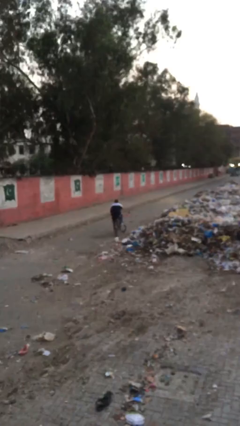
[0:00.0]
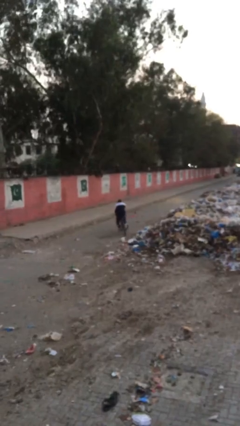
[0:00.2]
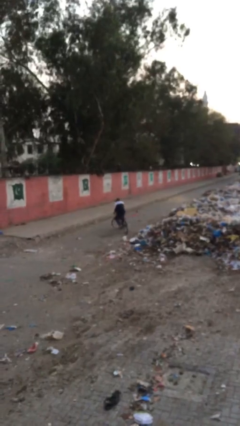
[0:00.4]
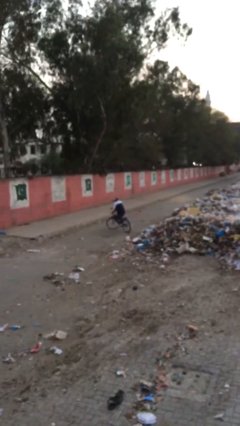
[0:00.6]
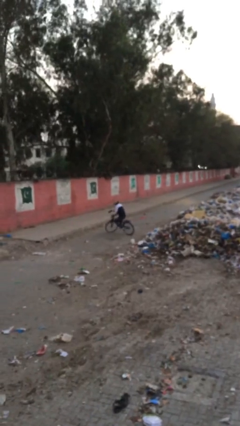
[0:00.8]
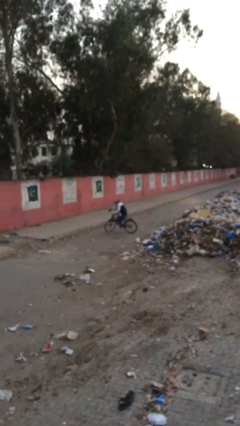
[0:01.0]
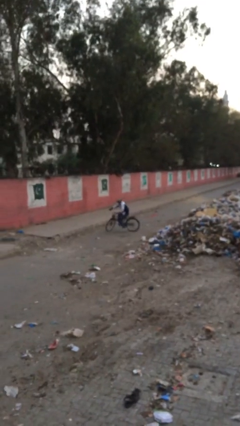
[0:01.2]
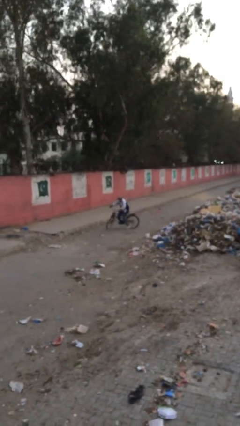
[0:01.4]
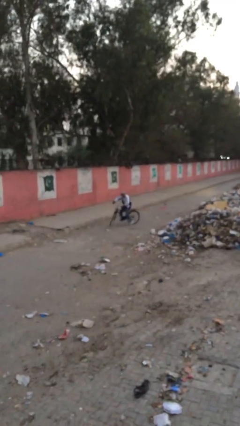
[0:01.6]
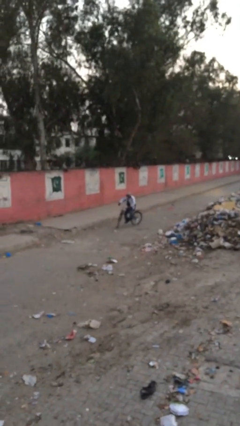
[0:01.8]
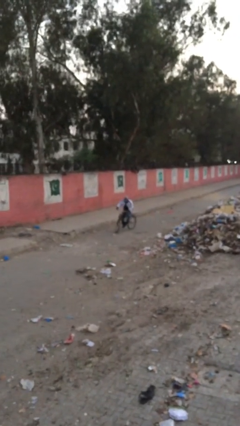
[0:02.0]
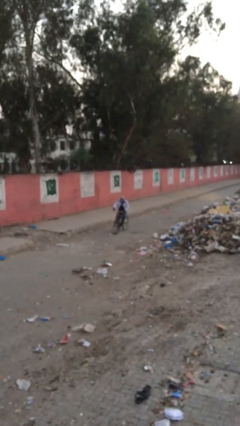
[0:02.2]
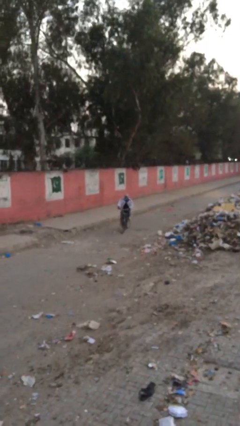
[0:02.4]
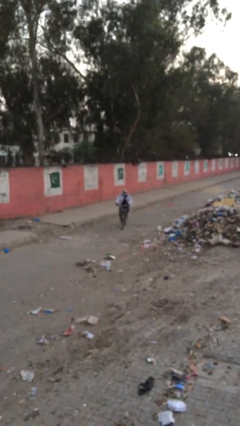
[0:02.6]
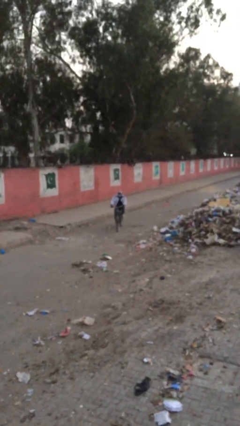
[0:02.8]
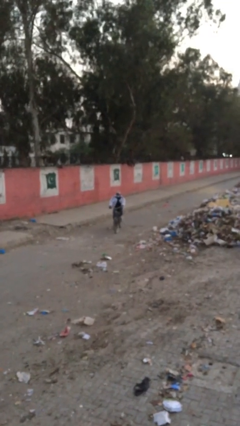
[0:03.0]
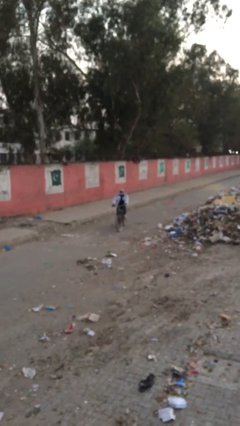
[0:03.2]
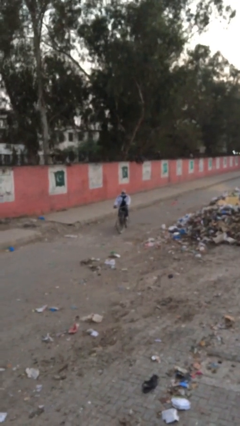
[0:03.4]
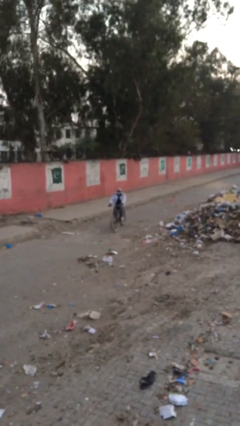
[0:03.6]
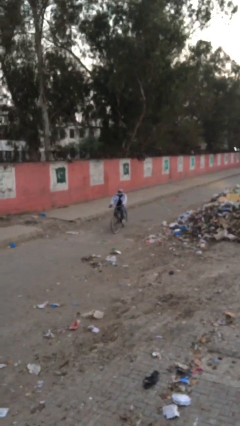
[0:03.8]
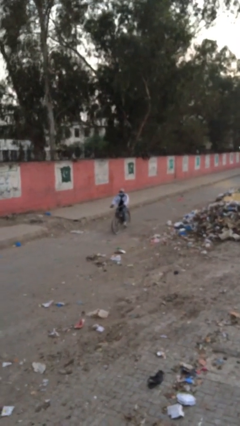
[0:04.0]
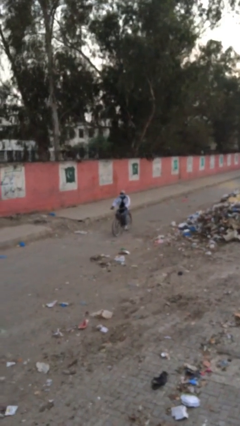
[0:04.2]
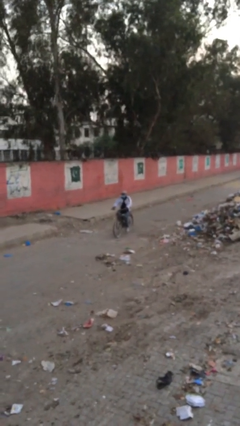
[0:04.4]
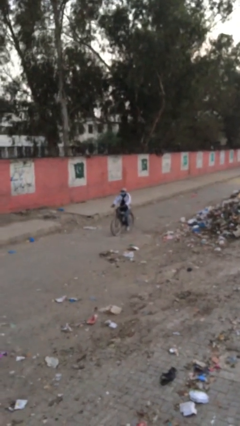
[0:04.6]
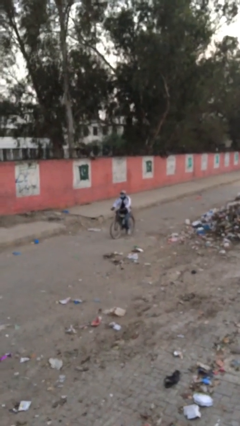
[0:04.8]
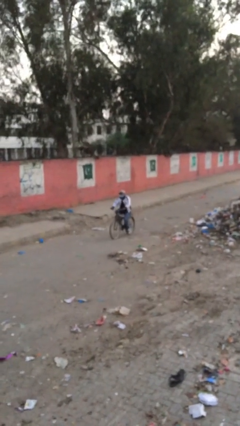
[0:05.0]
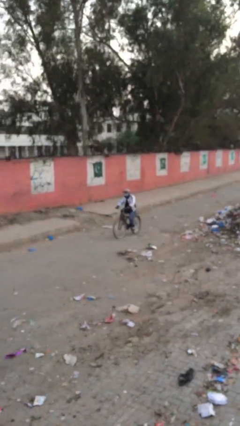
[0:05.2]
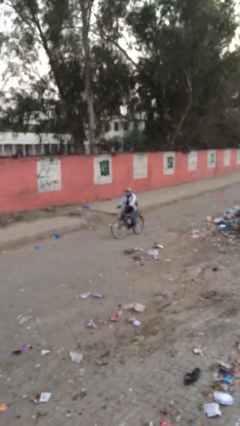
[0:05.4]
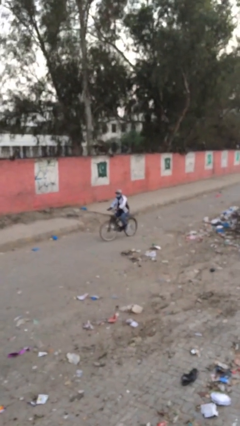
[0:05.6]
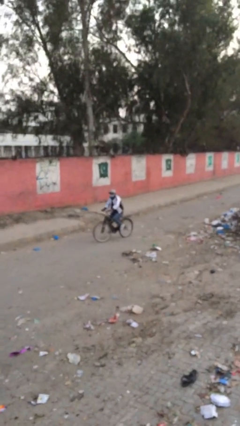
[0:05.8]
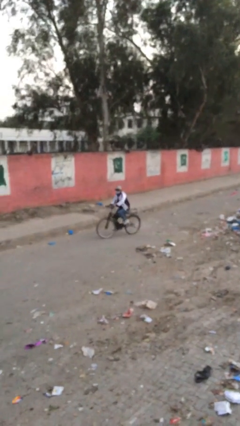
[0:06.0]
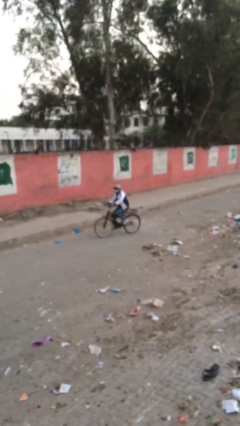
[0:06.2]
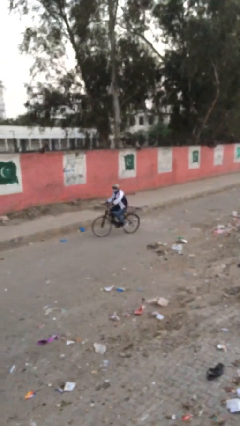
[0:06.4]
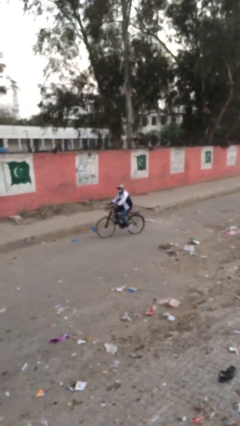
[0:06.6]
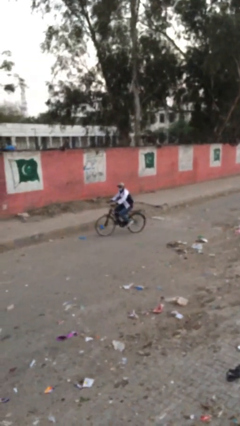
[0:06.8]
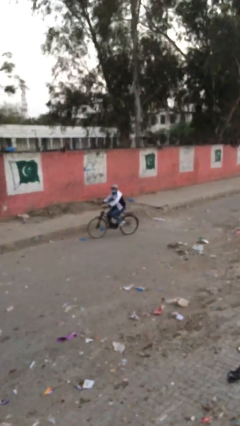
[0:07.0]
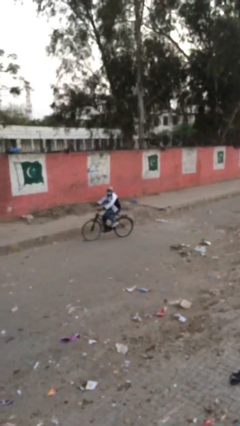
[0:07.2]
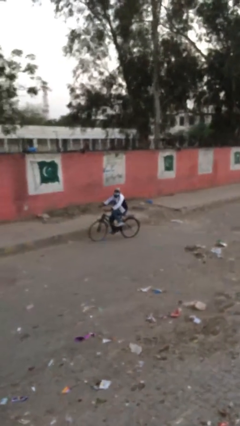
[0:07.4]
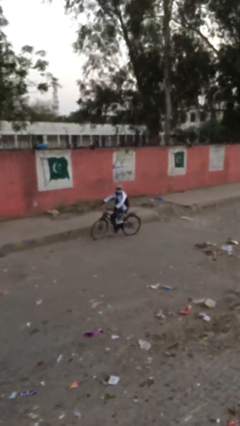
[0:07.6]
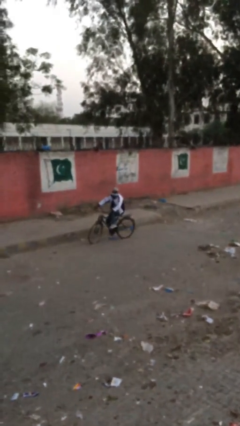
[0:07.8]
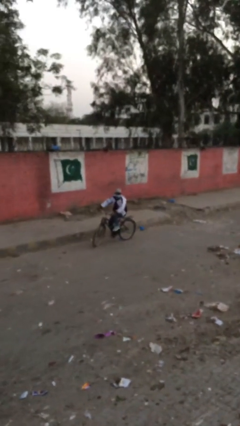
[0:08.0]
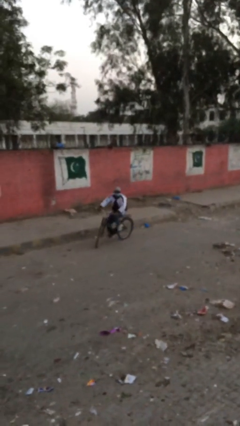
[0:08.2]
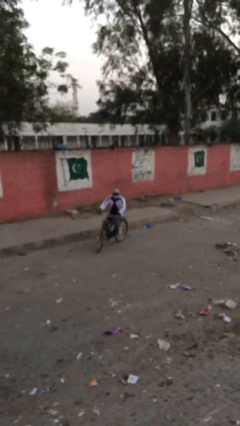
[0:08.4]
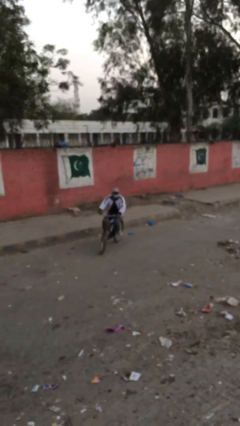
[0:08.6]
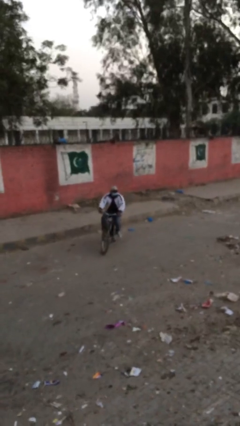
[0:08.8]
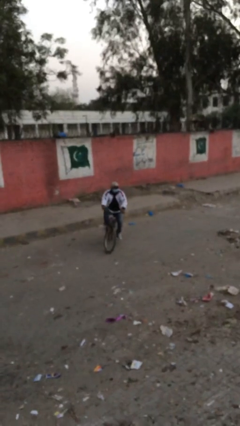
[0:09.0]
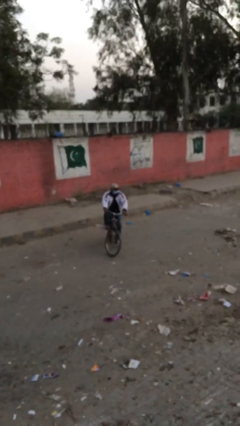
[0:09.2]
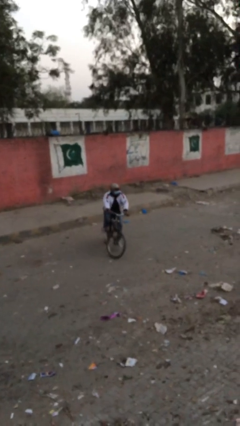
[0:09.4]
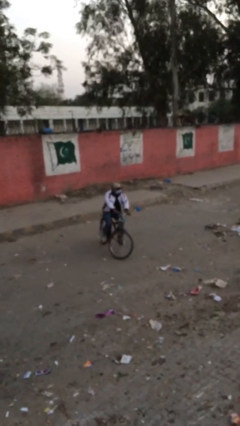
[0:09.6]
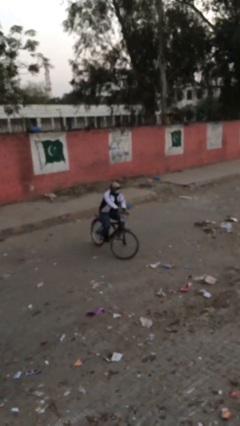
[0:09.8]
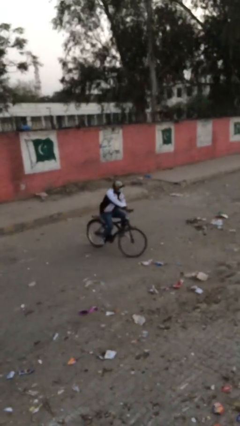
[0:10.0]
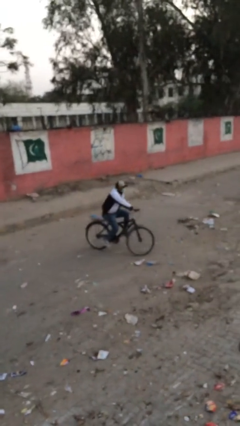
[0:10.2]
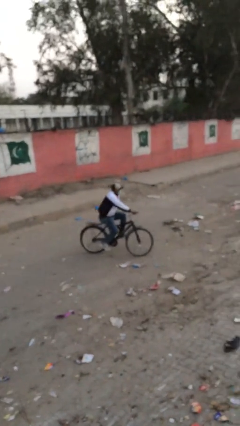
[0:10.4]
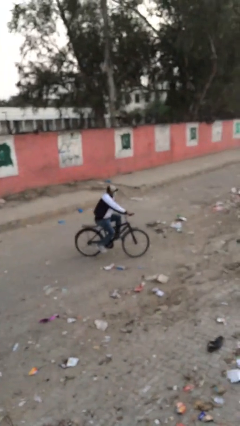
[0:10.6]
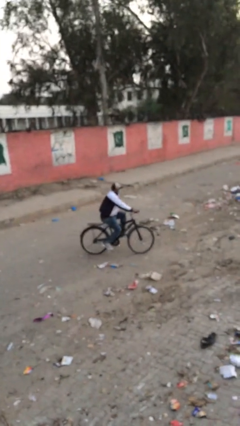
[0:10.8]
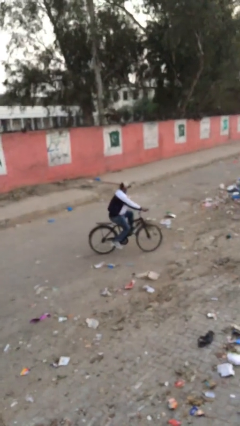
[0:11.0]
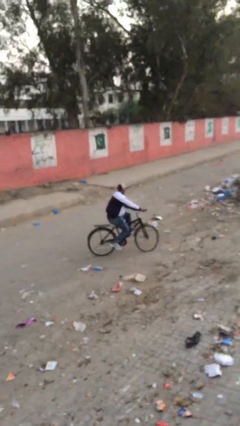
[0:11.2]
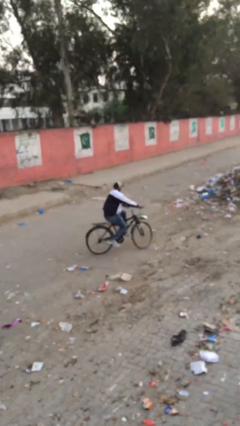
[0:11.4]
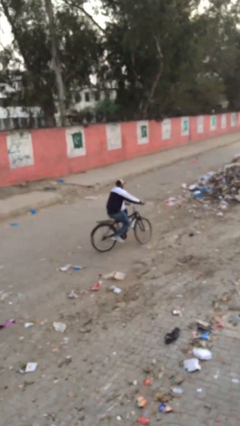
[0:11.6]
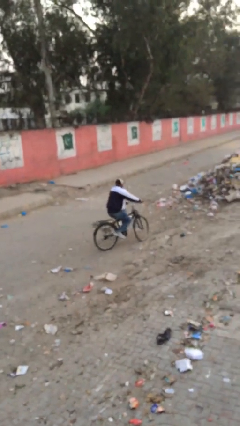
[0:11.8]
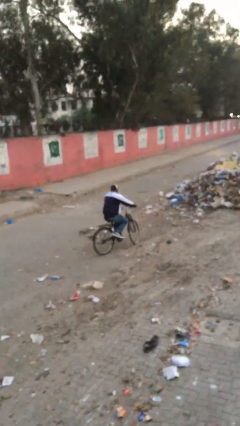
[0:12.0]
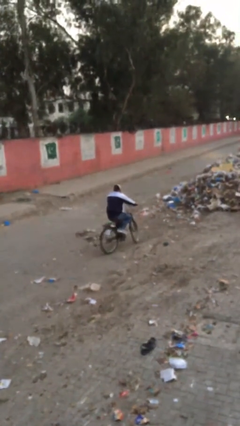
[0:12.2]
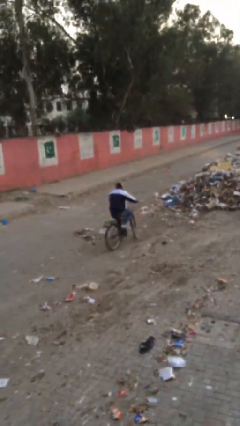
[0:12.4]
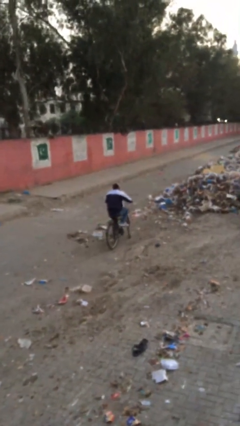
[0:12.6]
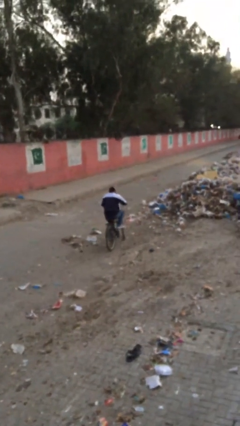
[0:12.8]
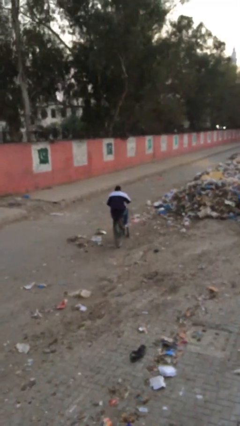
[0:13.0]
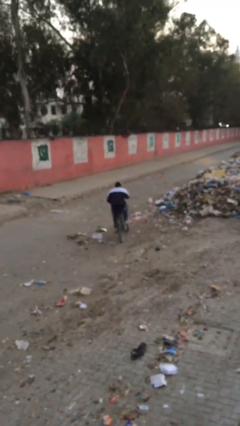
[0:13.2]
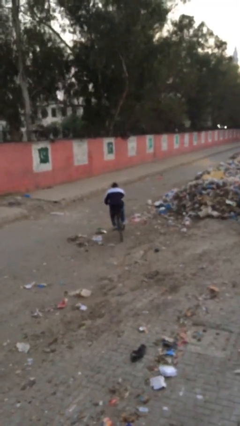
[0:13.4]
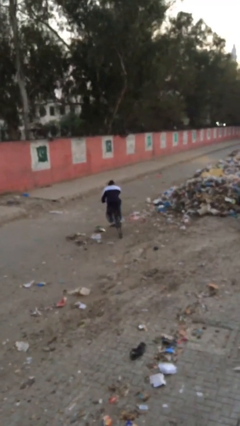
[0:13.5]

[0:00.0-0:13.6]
person rides bicycle

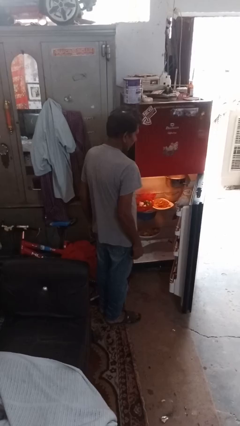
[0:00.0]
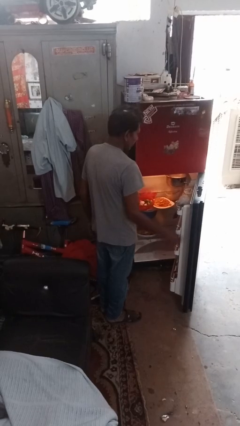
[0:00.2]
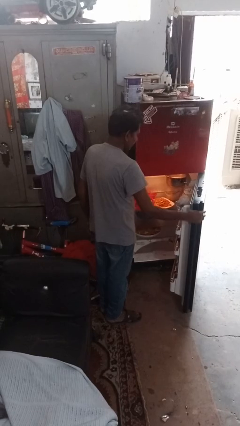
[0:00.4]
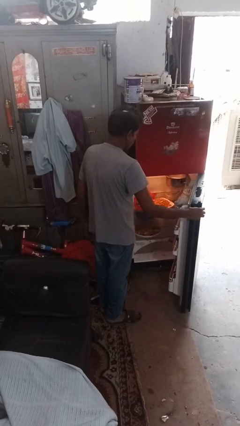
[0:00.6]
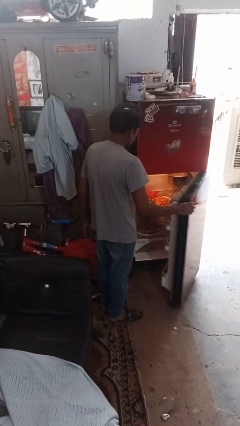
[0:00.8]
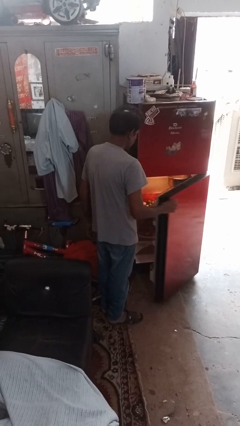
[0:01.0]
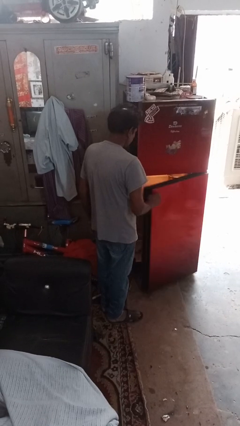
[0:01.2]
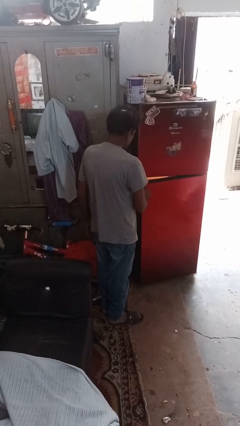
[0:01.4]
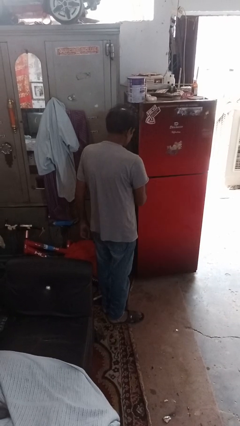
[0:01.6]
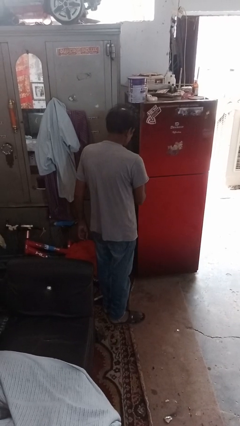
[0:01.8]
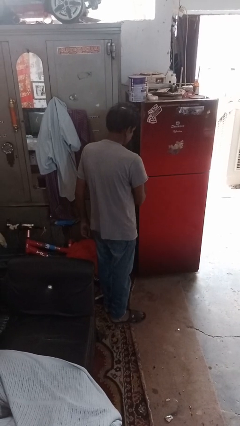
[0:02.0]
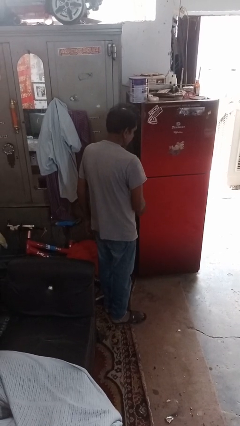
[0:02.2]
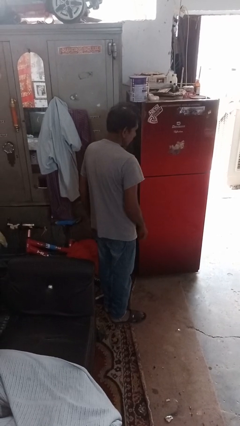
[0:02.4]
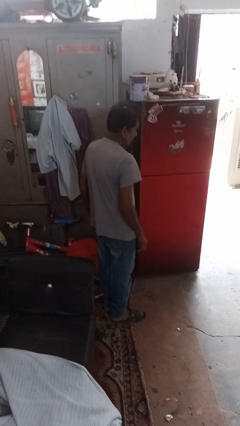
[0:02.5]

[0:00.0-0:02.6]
person closes refrigerator

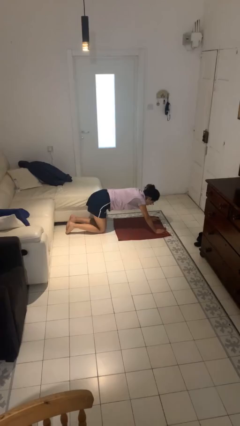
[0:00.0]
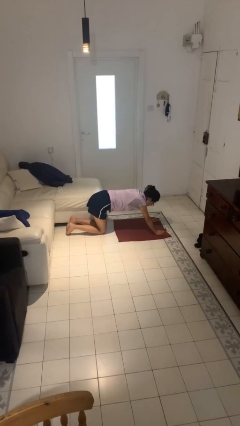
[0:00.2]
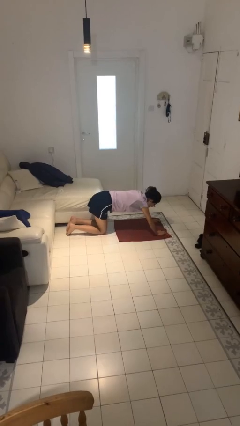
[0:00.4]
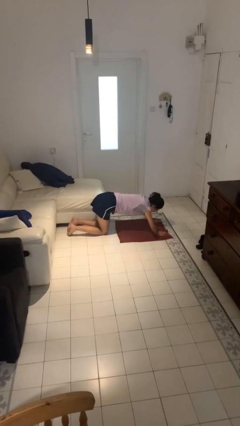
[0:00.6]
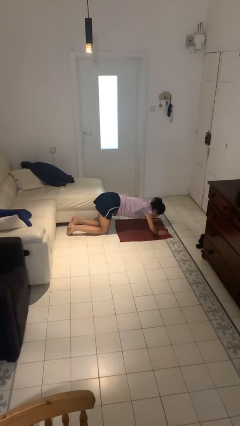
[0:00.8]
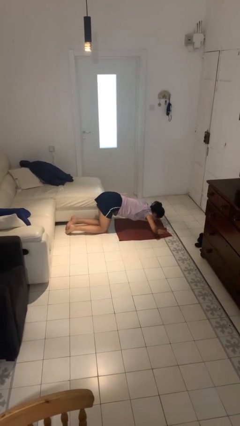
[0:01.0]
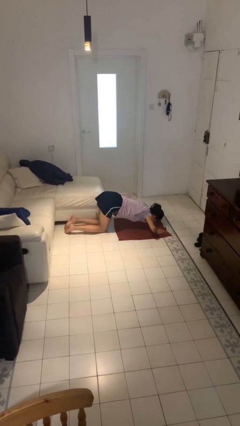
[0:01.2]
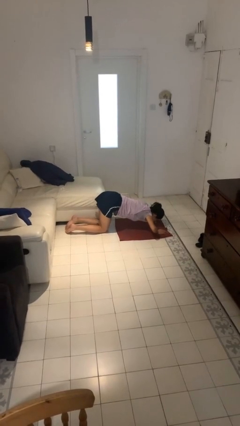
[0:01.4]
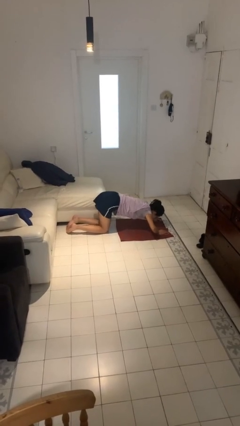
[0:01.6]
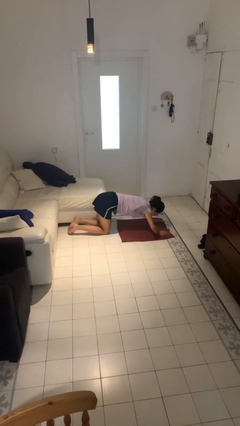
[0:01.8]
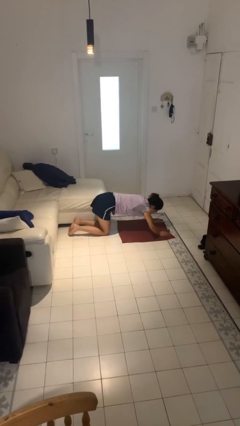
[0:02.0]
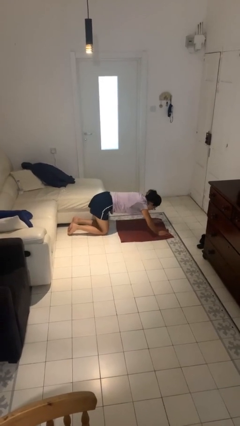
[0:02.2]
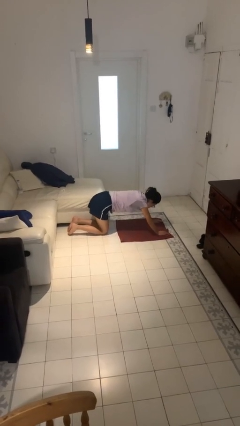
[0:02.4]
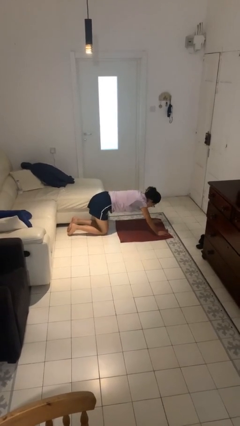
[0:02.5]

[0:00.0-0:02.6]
person exercises with pushup
